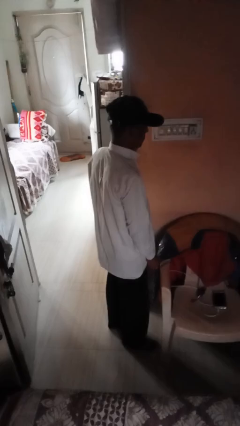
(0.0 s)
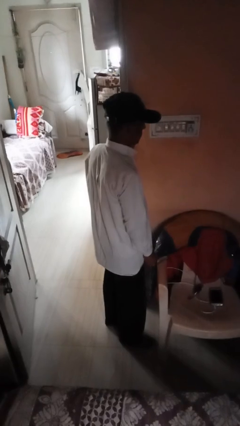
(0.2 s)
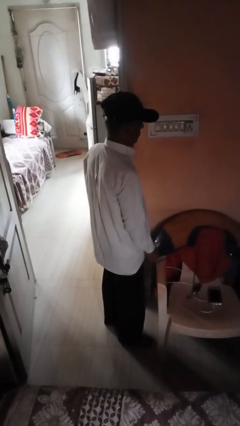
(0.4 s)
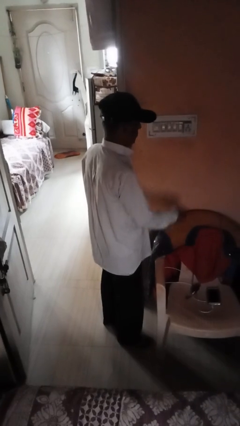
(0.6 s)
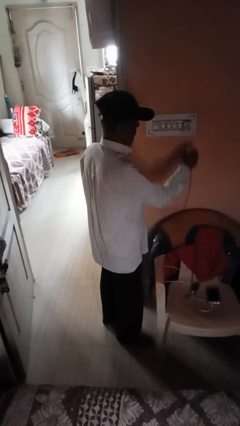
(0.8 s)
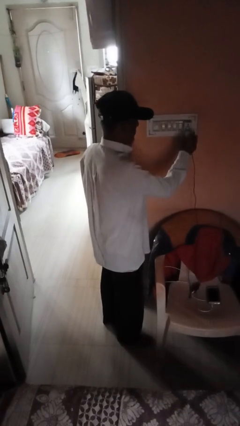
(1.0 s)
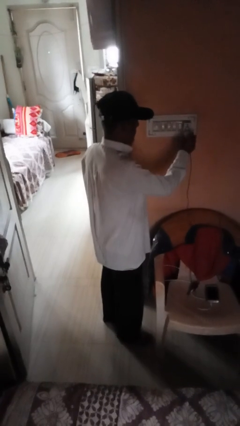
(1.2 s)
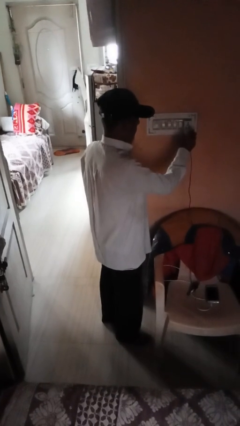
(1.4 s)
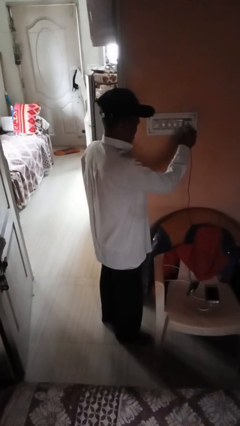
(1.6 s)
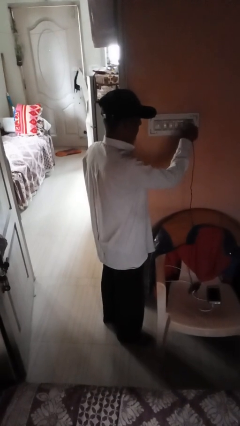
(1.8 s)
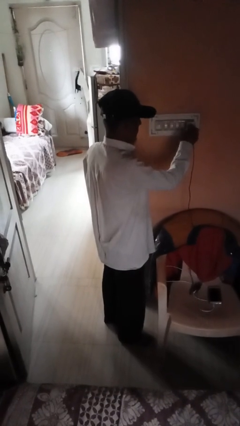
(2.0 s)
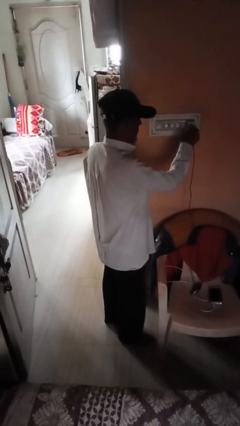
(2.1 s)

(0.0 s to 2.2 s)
person plugs into electrical socket

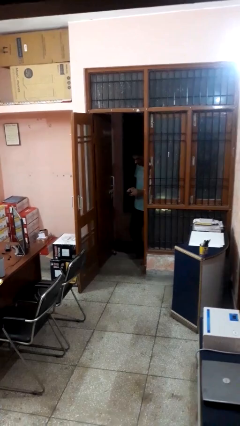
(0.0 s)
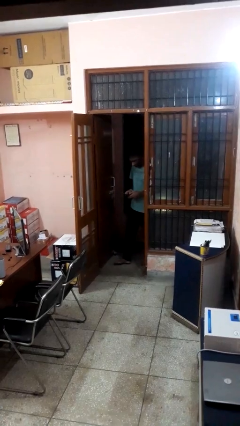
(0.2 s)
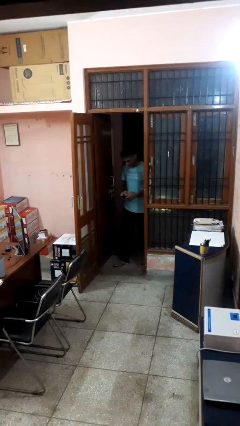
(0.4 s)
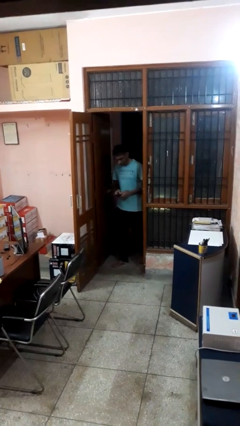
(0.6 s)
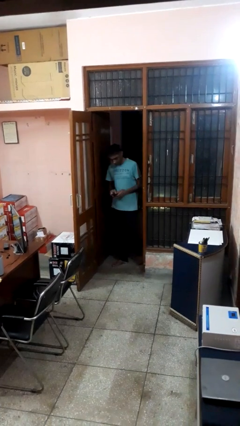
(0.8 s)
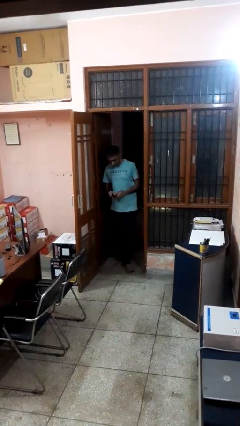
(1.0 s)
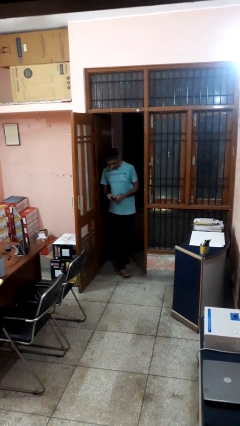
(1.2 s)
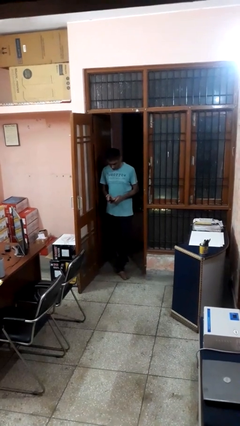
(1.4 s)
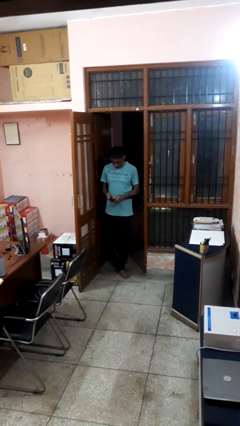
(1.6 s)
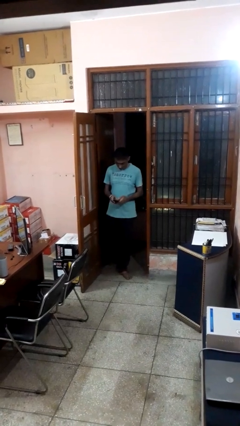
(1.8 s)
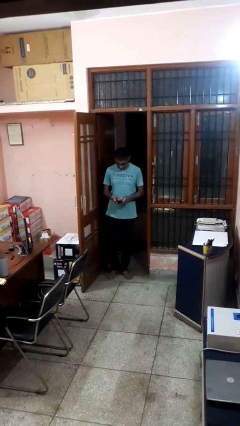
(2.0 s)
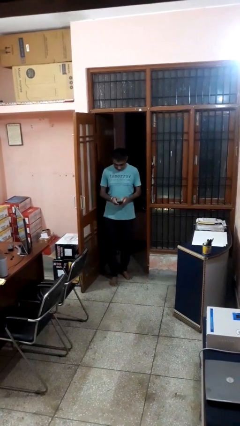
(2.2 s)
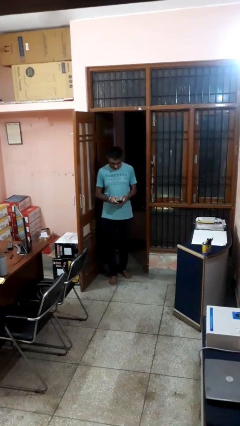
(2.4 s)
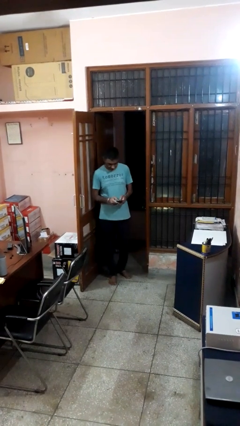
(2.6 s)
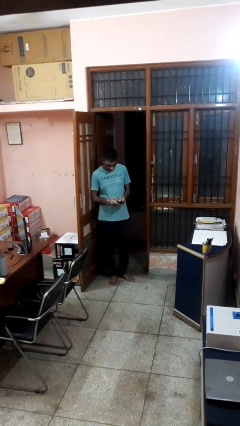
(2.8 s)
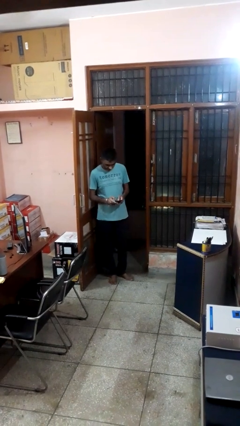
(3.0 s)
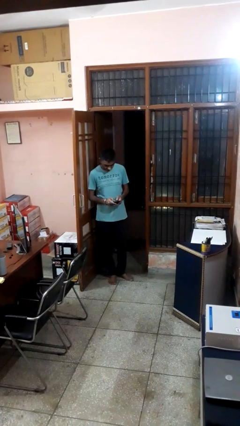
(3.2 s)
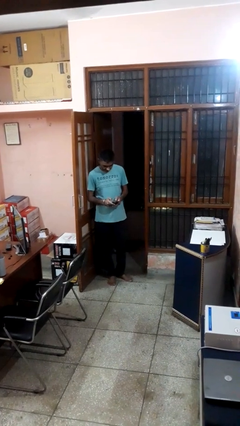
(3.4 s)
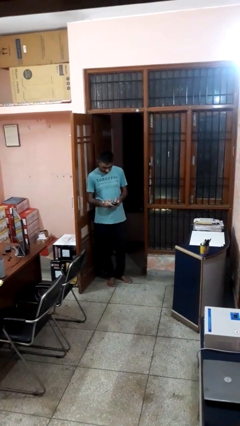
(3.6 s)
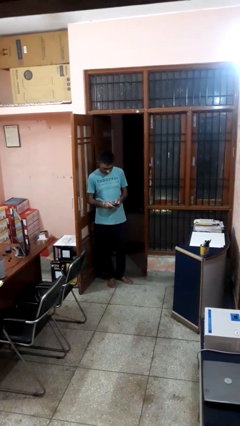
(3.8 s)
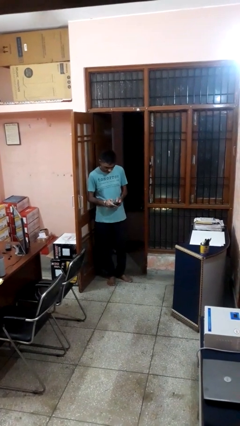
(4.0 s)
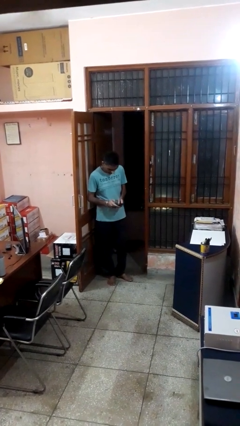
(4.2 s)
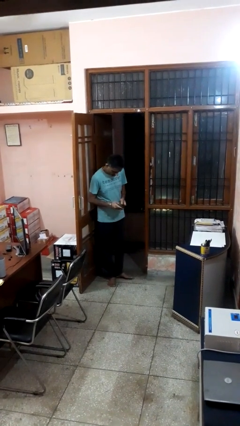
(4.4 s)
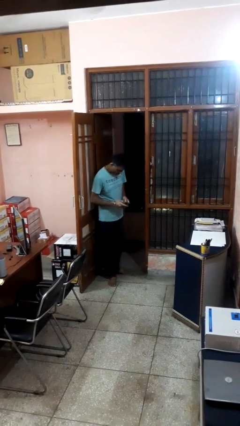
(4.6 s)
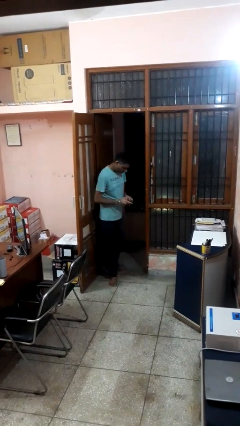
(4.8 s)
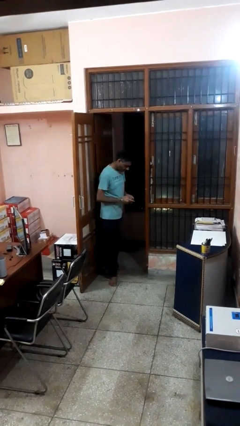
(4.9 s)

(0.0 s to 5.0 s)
person enters scene through structure

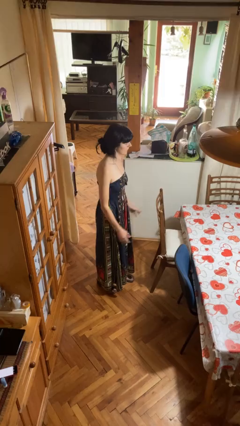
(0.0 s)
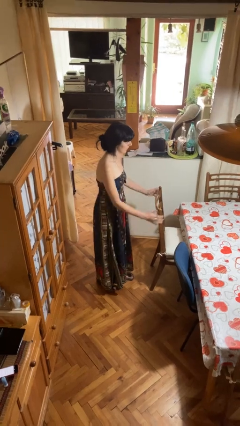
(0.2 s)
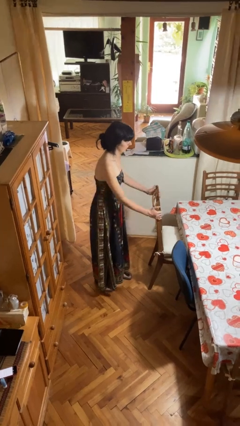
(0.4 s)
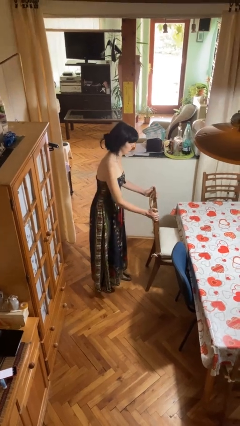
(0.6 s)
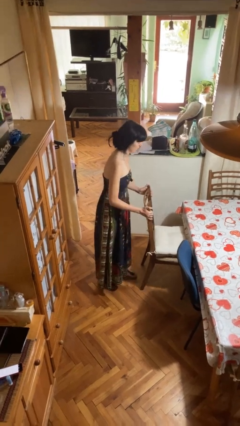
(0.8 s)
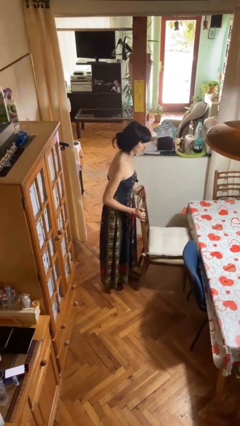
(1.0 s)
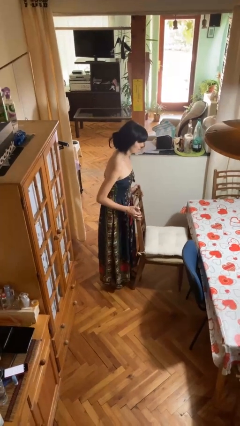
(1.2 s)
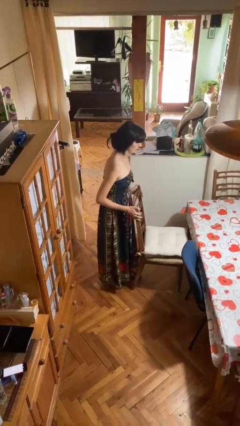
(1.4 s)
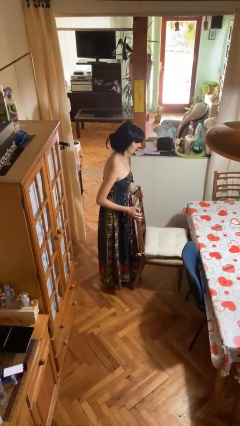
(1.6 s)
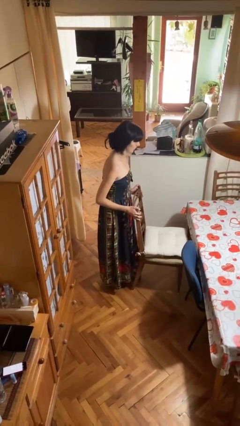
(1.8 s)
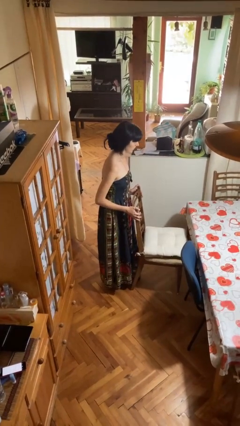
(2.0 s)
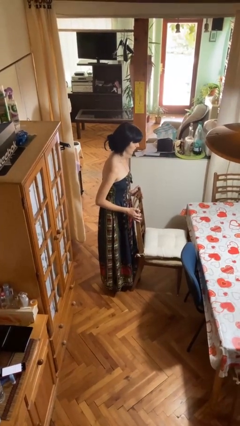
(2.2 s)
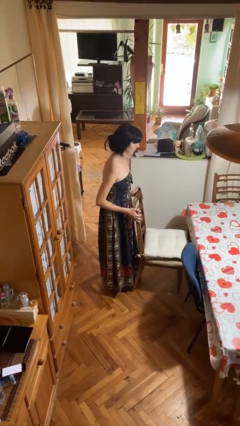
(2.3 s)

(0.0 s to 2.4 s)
person pulls out chair

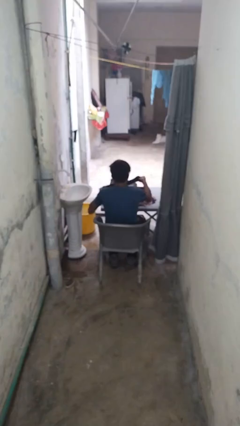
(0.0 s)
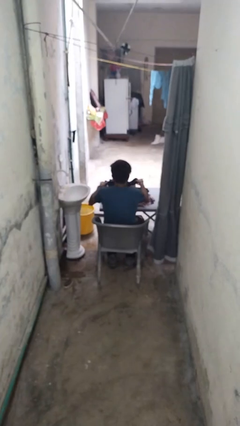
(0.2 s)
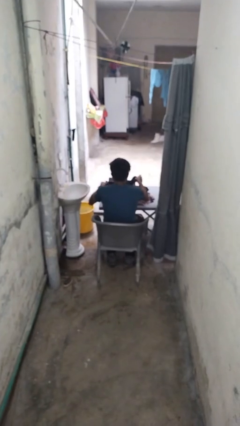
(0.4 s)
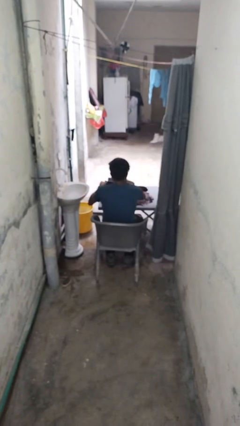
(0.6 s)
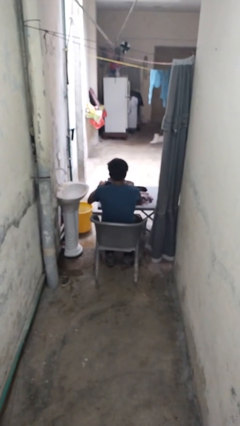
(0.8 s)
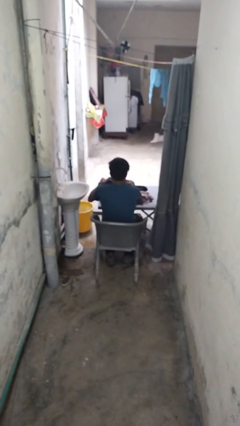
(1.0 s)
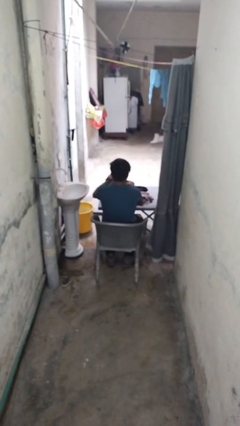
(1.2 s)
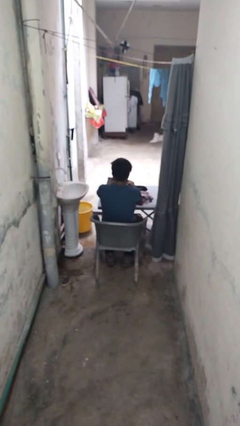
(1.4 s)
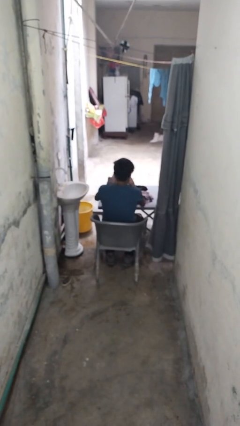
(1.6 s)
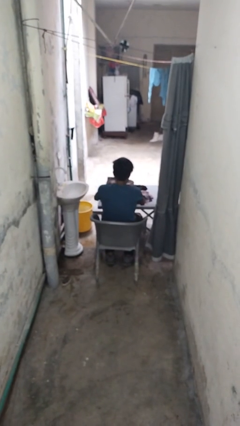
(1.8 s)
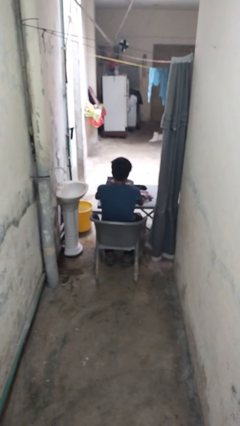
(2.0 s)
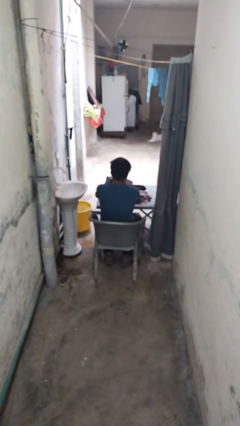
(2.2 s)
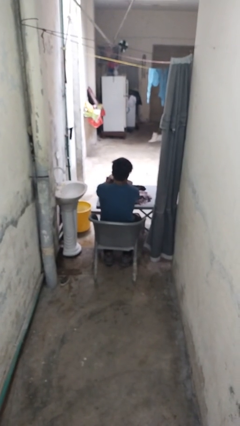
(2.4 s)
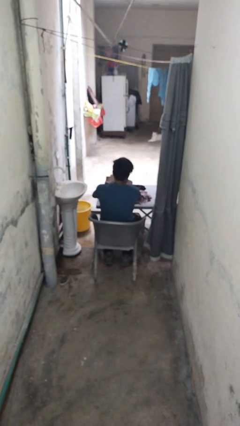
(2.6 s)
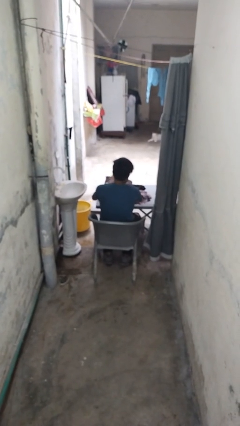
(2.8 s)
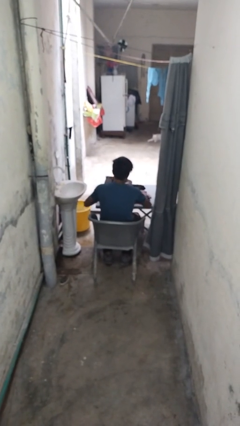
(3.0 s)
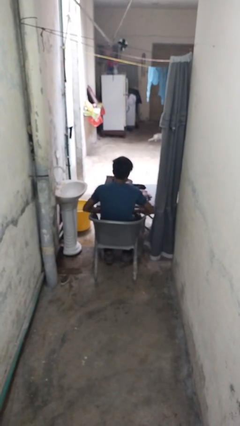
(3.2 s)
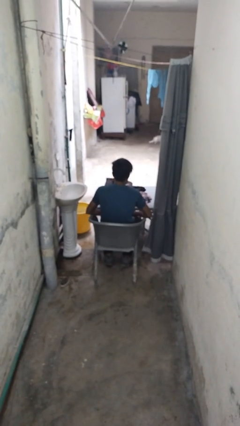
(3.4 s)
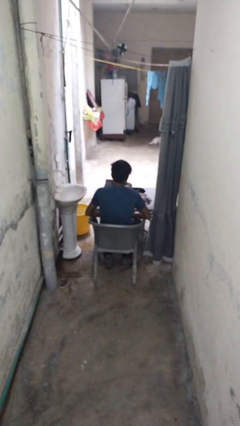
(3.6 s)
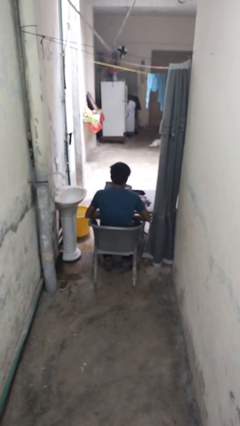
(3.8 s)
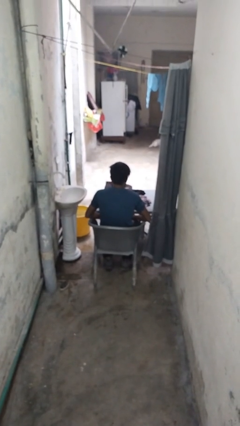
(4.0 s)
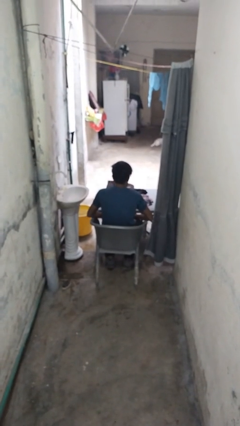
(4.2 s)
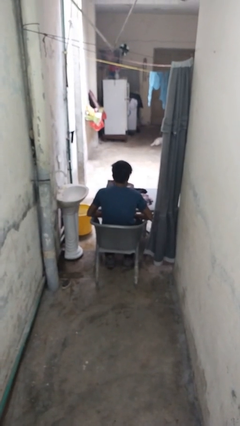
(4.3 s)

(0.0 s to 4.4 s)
person folds socks

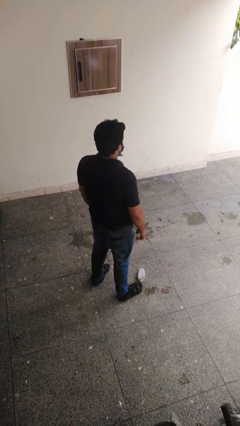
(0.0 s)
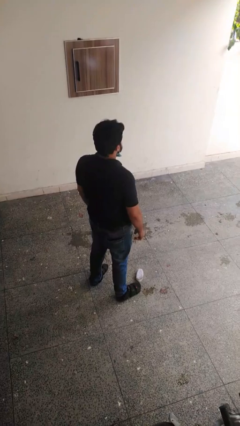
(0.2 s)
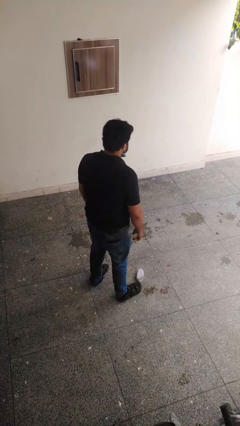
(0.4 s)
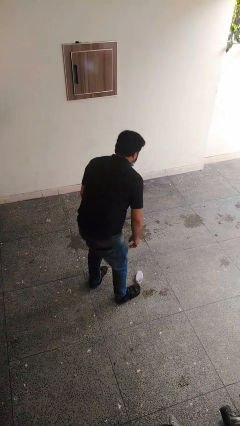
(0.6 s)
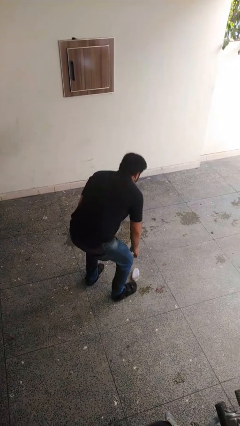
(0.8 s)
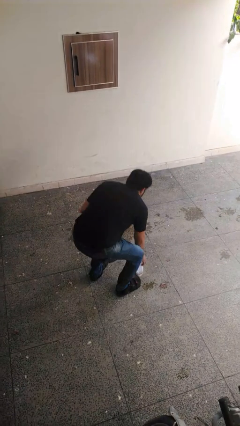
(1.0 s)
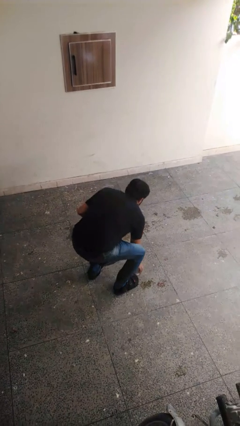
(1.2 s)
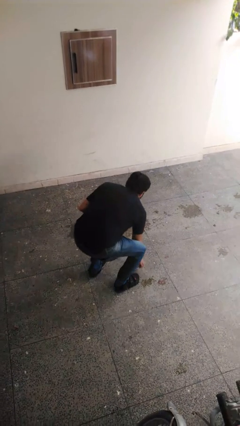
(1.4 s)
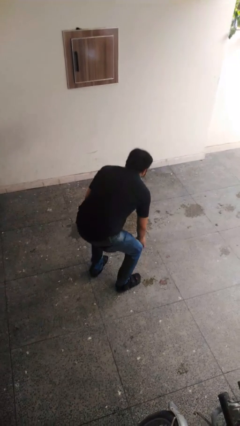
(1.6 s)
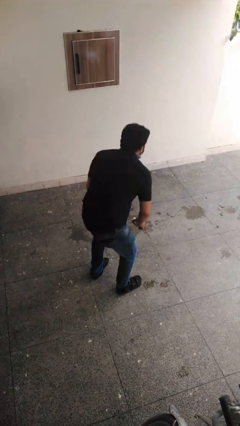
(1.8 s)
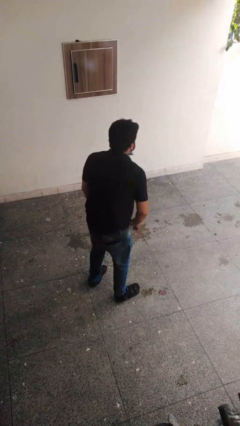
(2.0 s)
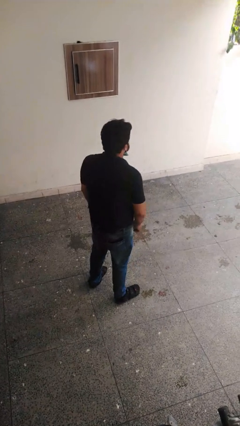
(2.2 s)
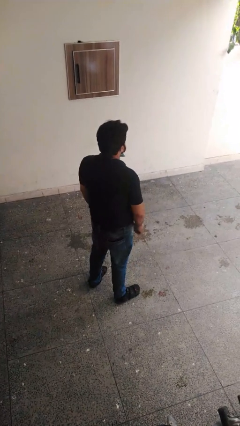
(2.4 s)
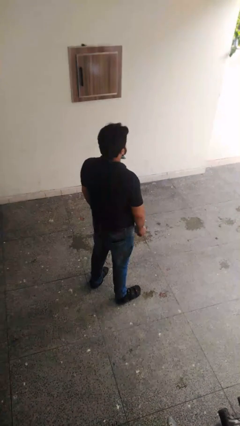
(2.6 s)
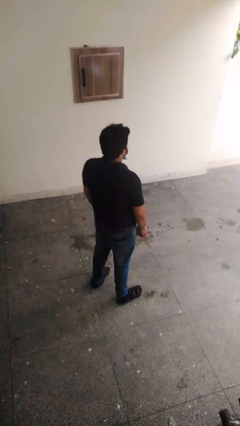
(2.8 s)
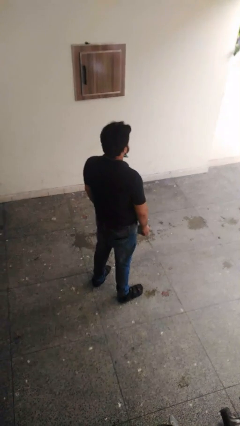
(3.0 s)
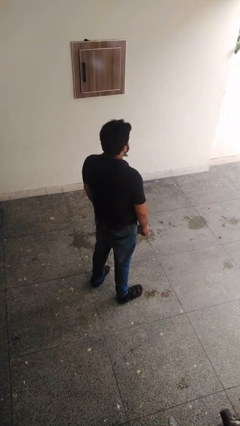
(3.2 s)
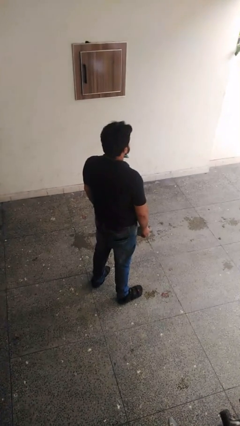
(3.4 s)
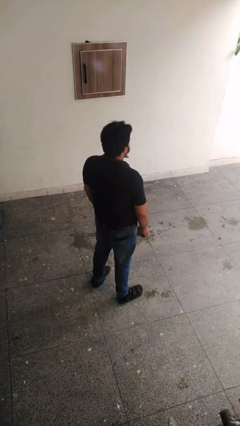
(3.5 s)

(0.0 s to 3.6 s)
person picks up object from floor

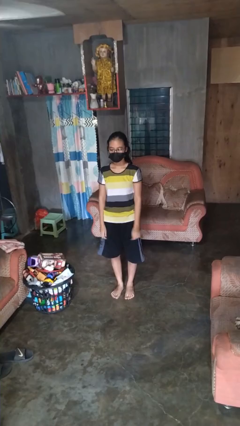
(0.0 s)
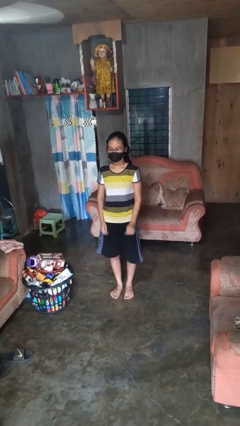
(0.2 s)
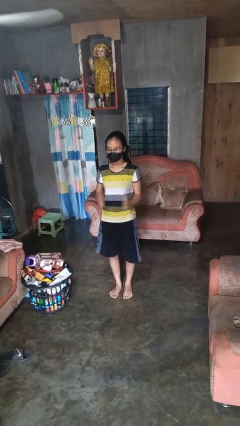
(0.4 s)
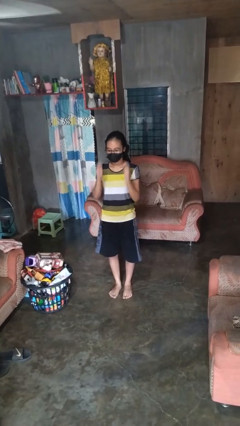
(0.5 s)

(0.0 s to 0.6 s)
person takes off glasses
